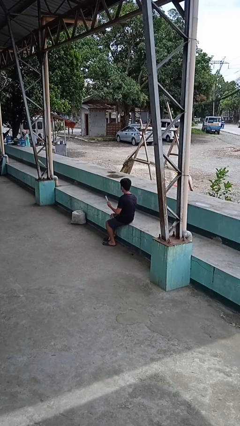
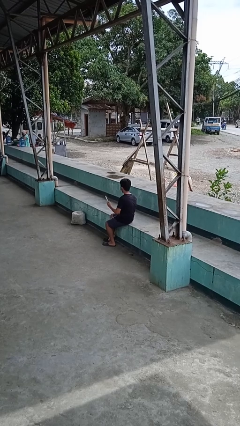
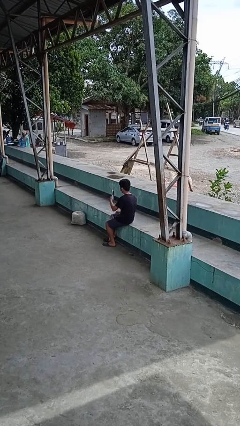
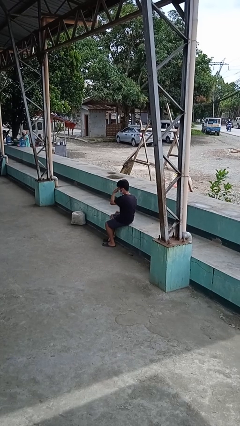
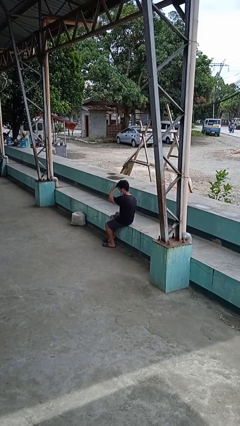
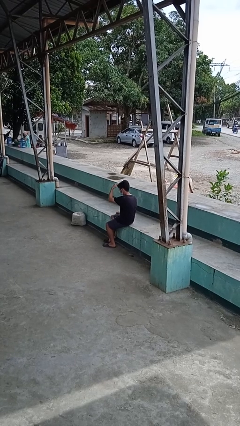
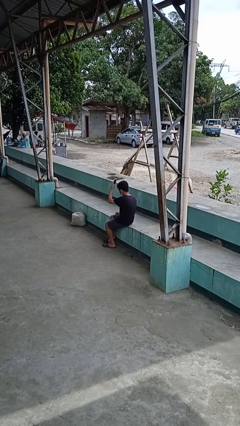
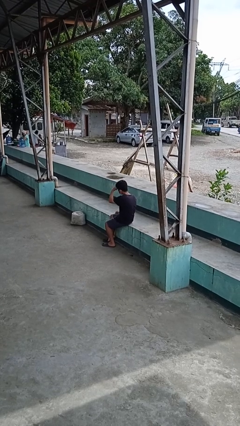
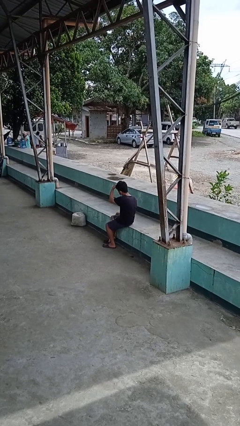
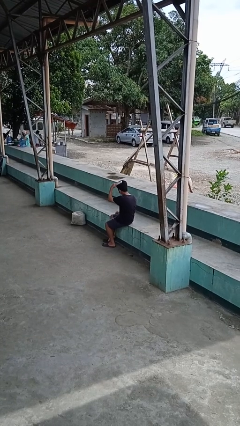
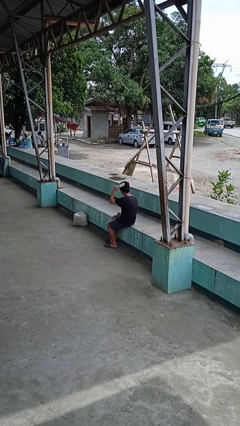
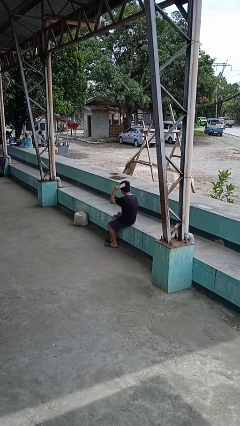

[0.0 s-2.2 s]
person brushes hair

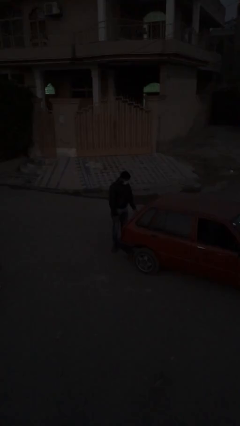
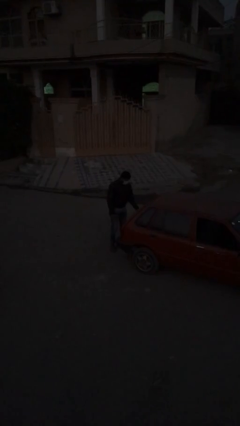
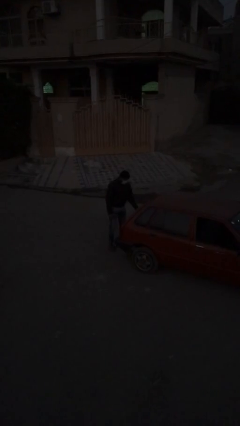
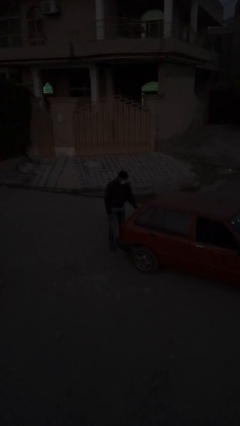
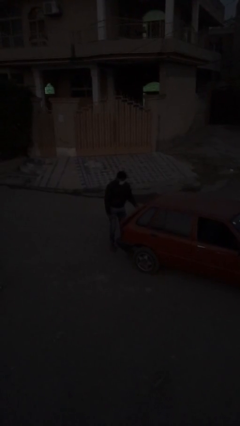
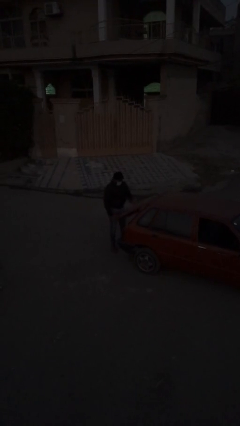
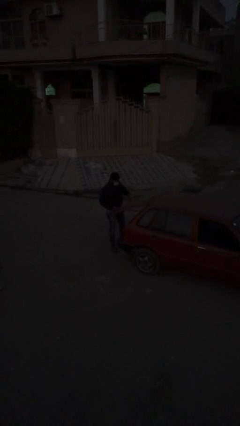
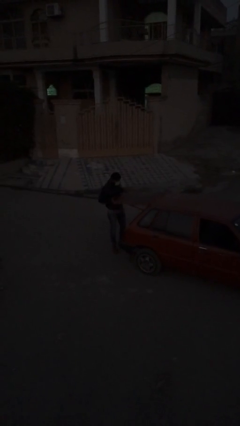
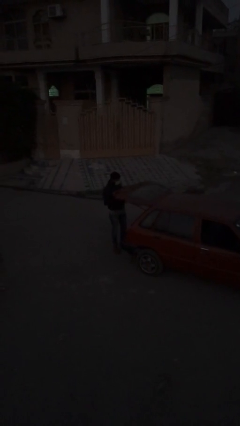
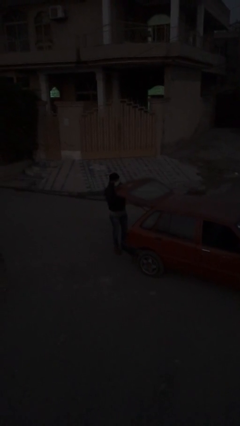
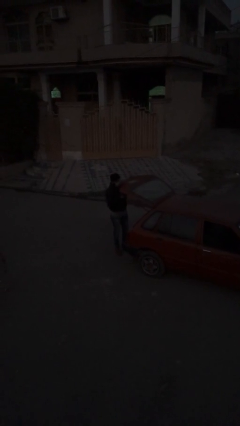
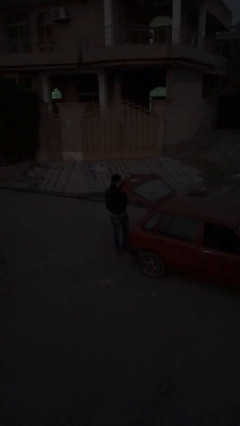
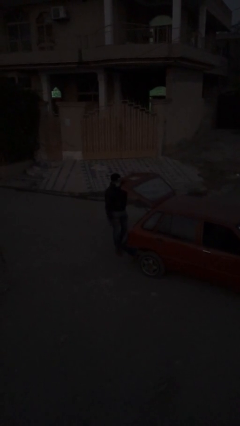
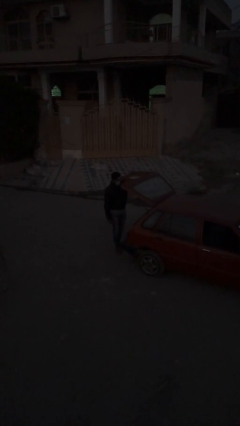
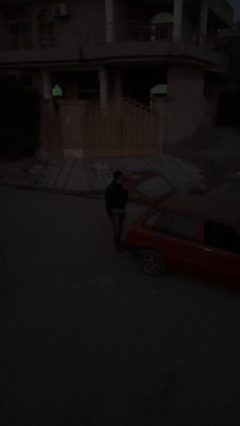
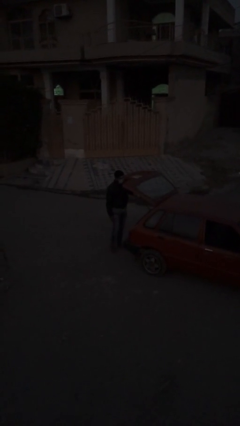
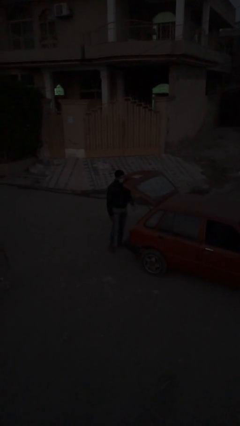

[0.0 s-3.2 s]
person opens car trunk

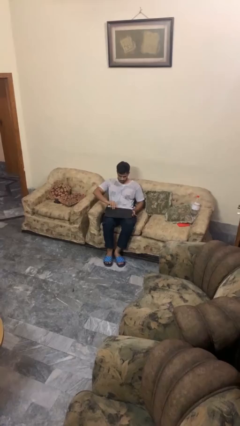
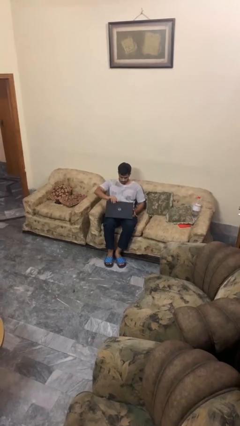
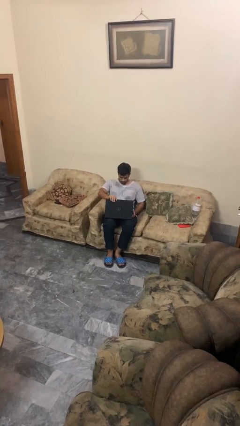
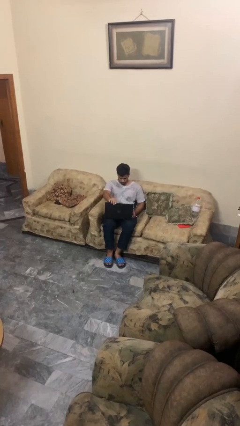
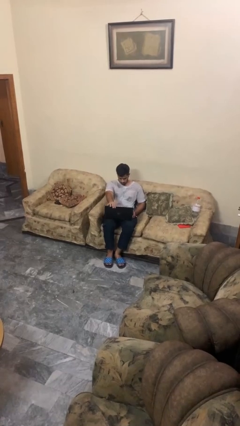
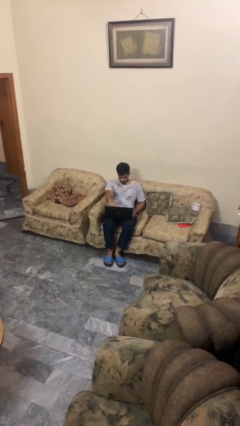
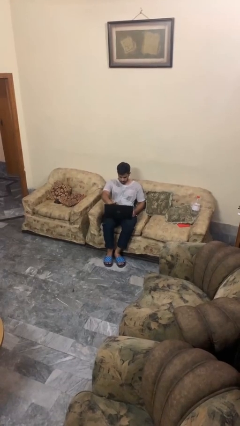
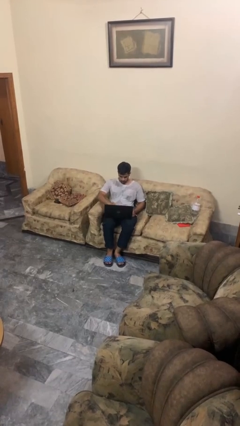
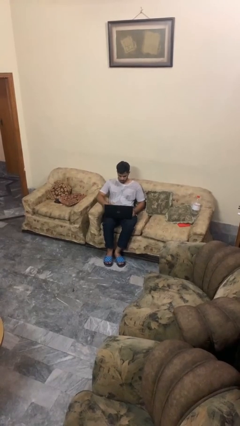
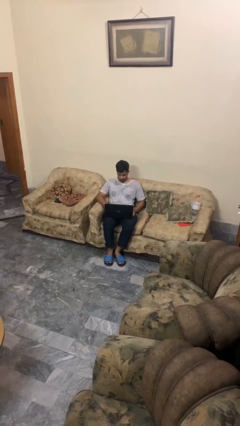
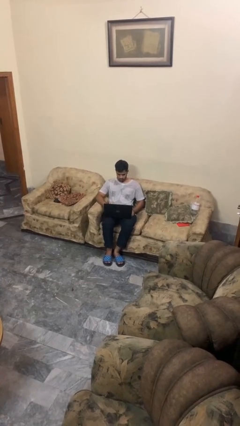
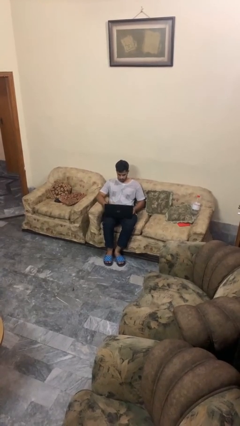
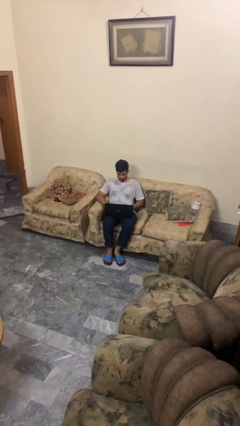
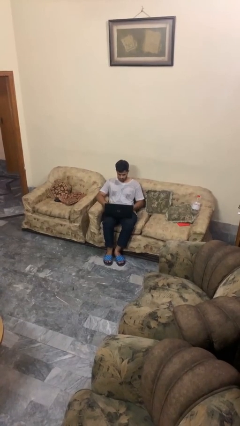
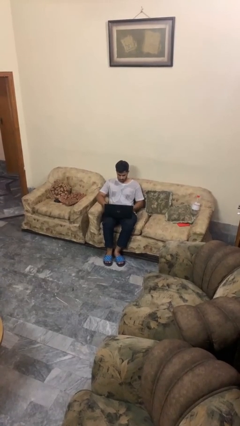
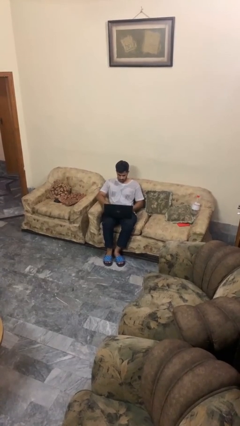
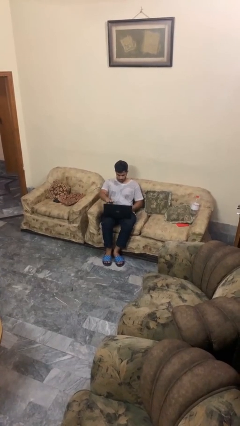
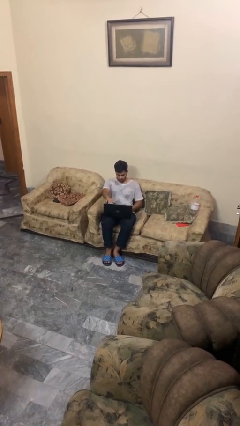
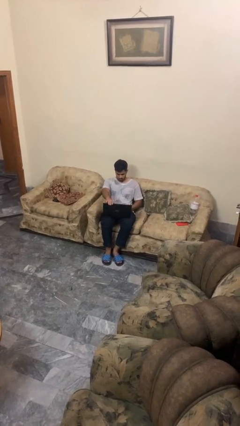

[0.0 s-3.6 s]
person opens laptop

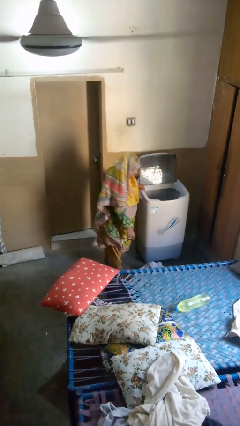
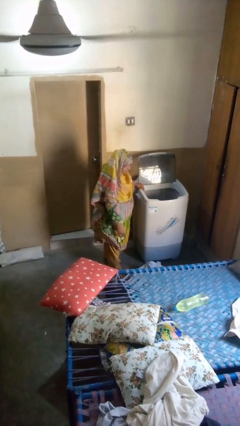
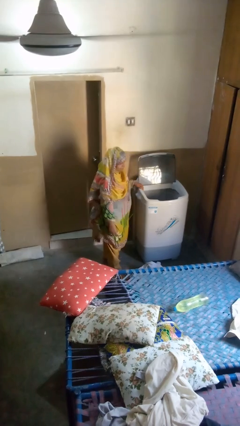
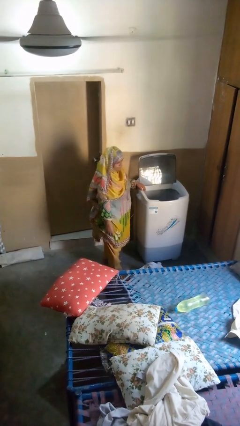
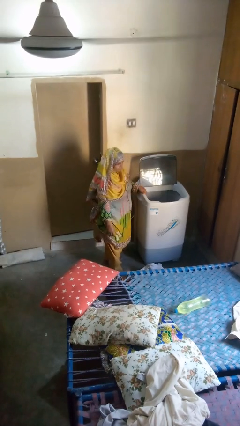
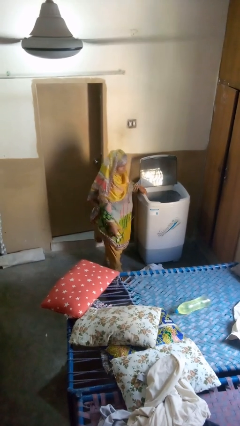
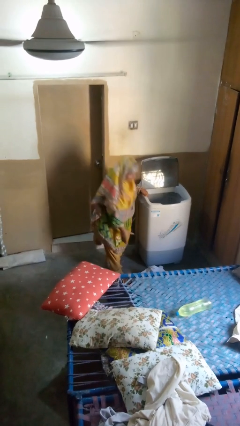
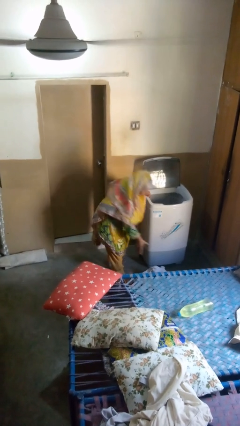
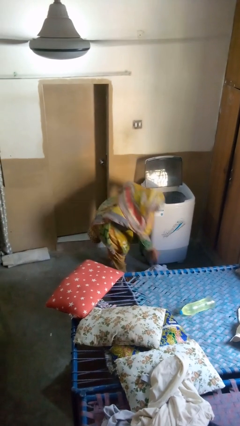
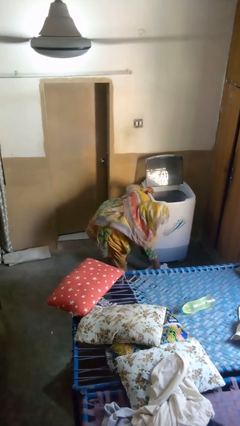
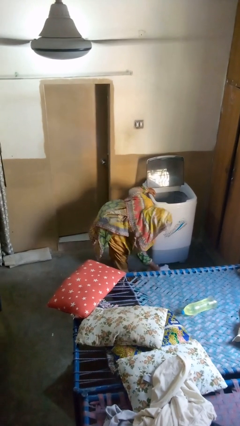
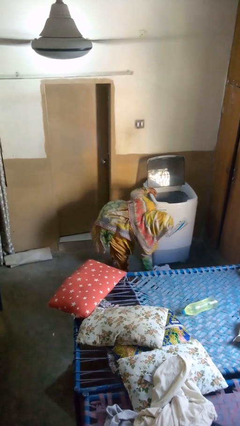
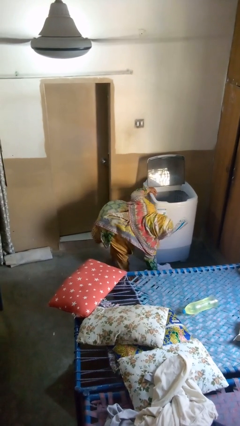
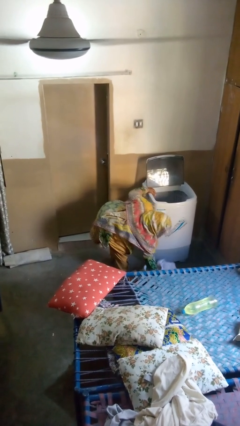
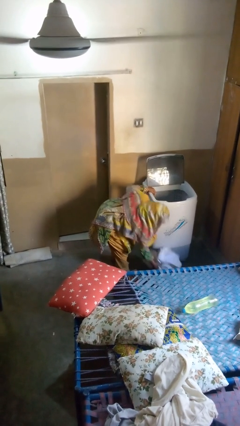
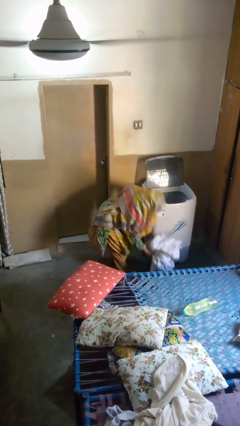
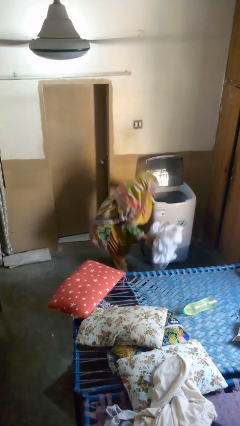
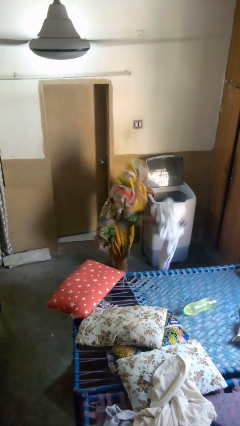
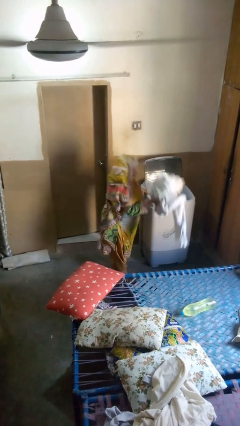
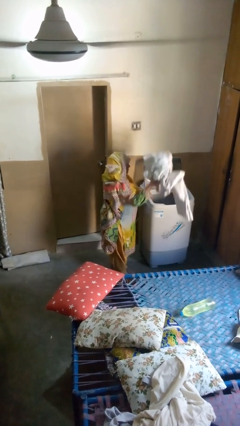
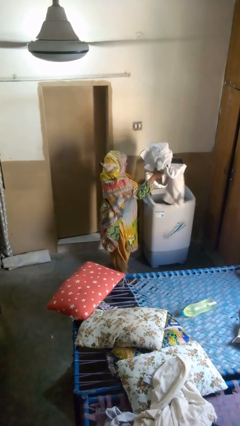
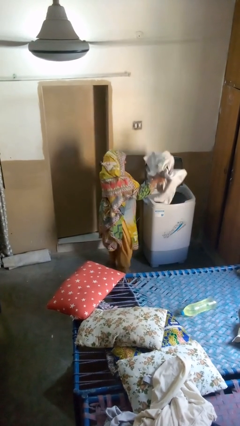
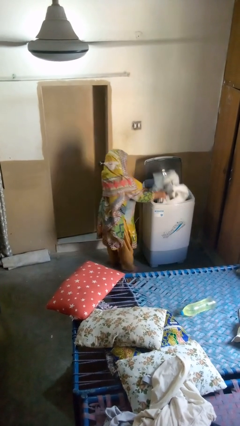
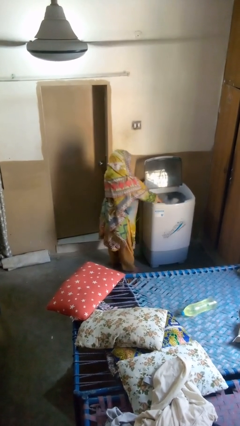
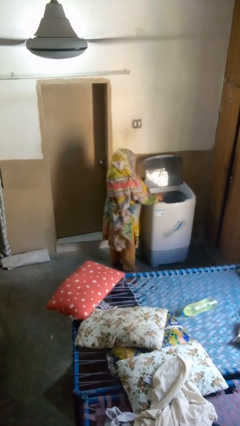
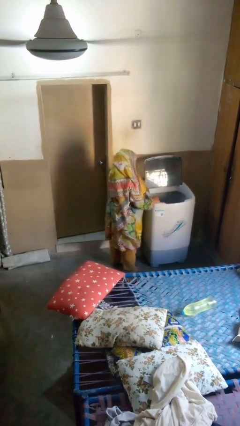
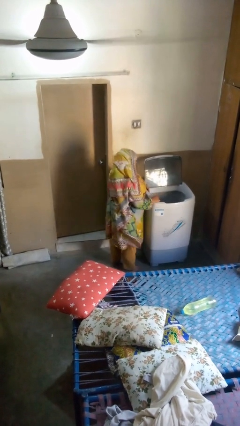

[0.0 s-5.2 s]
person loads clotheswasher

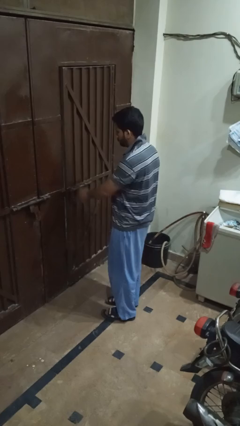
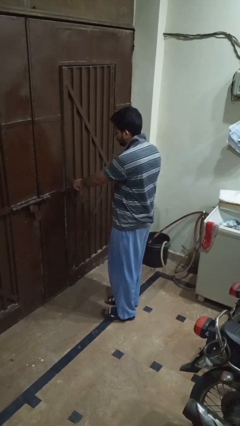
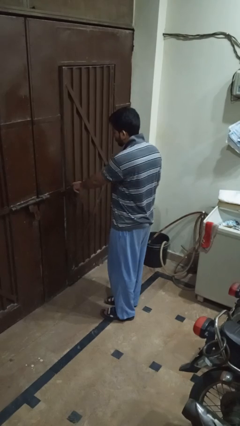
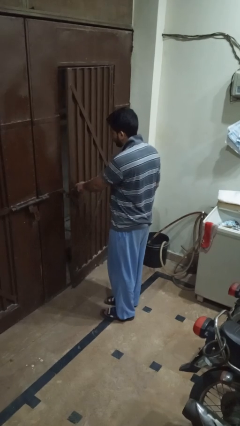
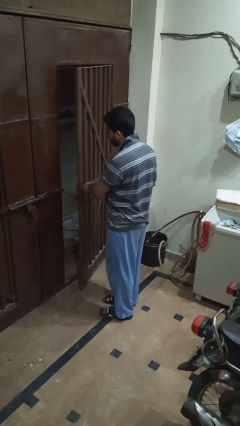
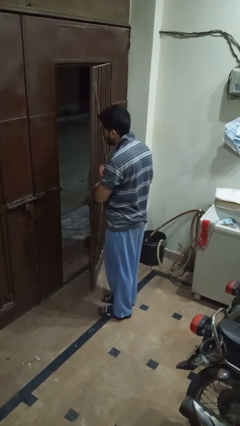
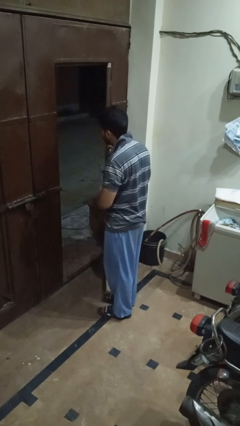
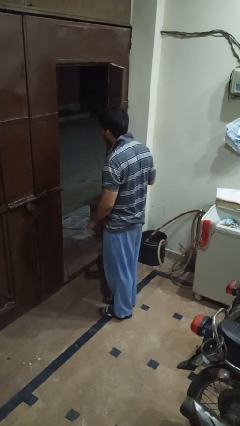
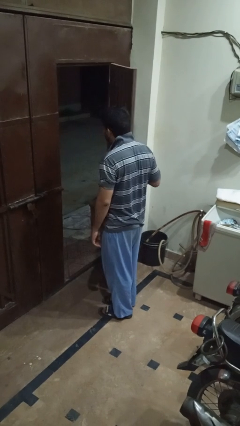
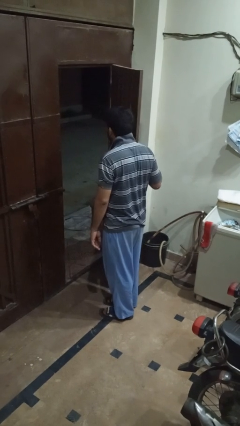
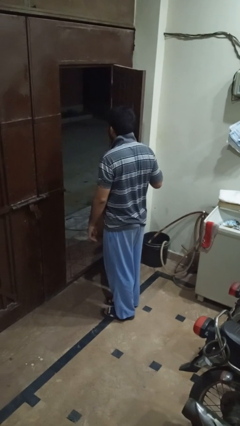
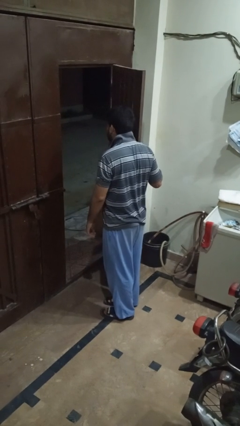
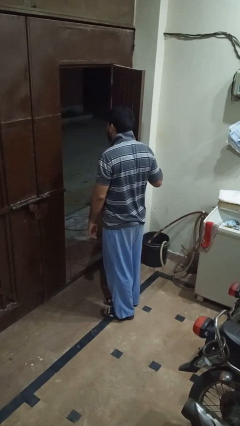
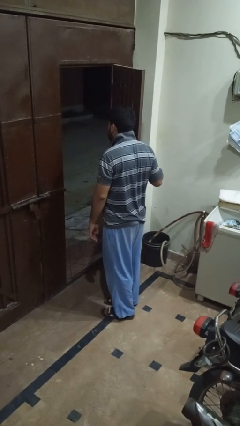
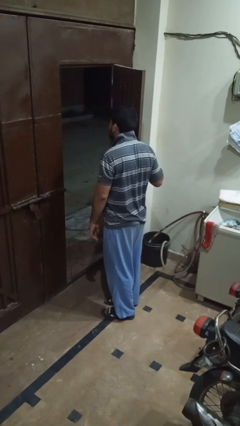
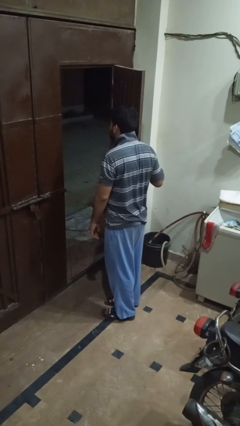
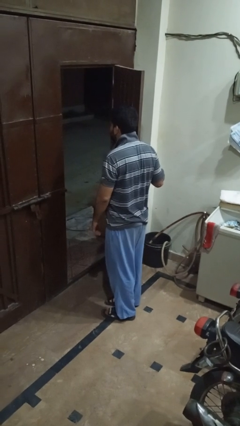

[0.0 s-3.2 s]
person opens gate
